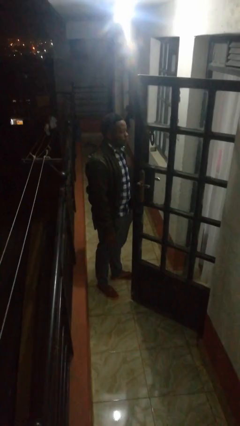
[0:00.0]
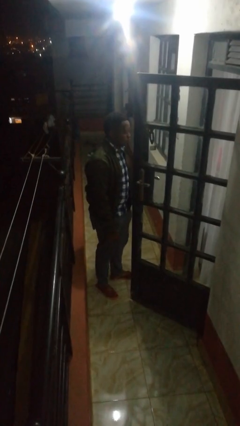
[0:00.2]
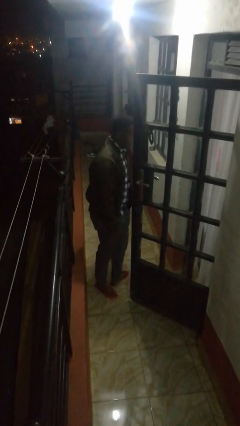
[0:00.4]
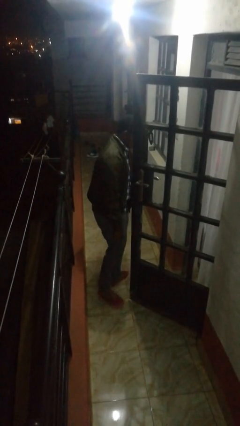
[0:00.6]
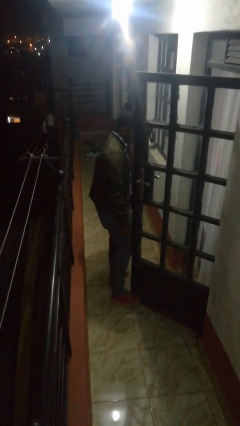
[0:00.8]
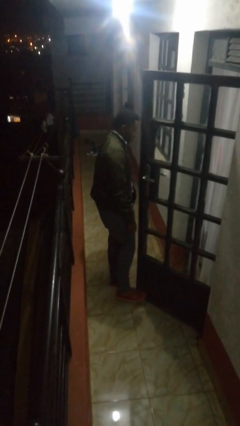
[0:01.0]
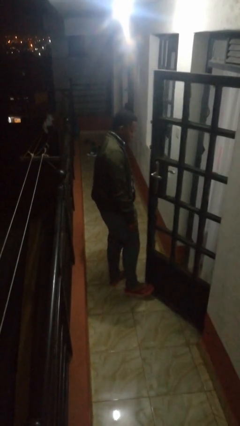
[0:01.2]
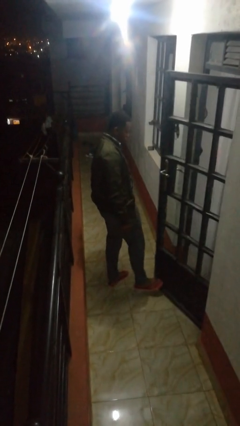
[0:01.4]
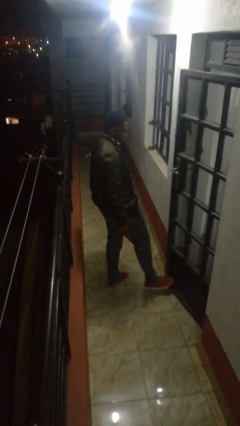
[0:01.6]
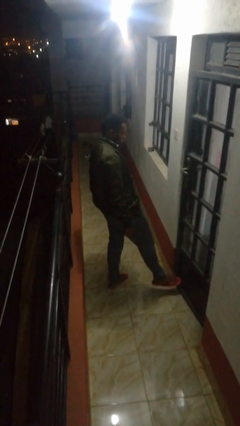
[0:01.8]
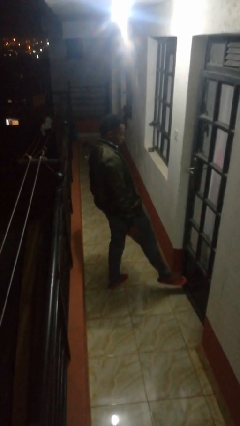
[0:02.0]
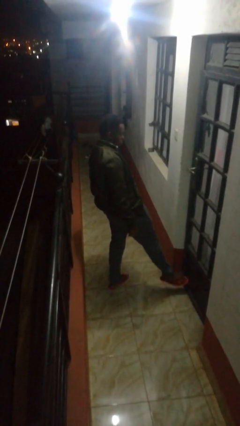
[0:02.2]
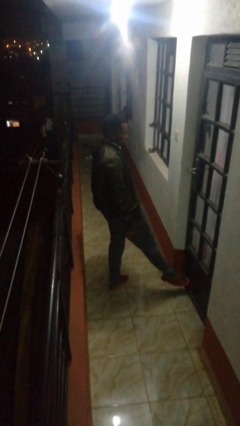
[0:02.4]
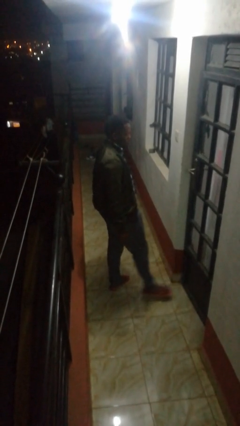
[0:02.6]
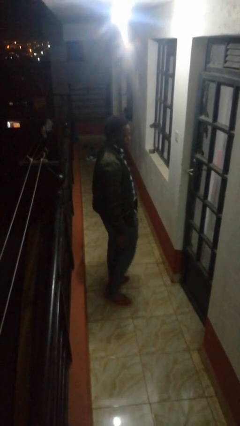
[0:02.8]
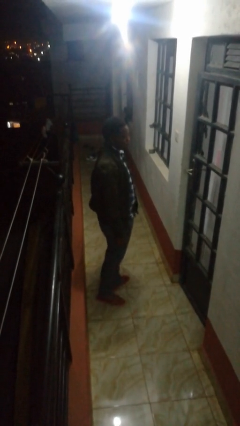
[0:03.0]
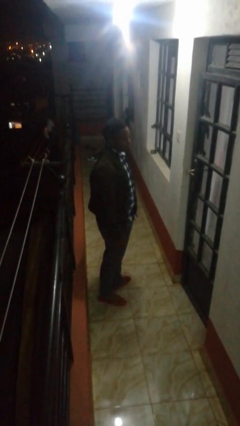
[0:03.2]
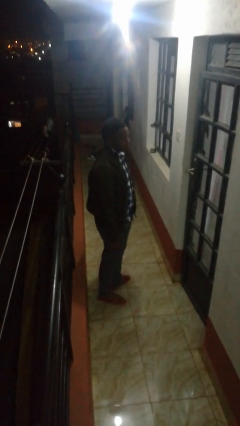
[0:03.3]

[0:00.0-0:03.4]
person closes door with foot

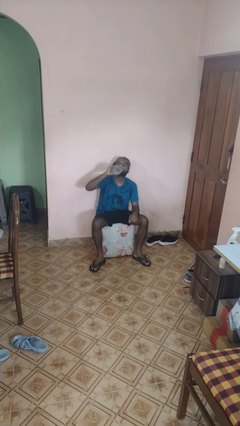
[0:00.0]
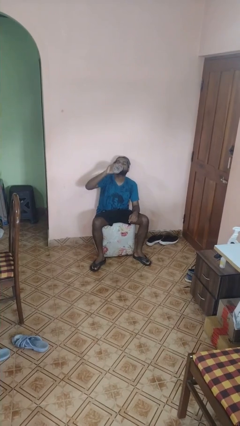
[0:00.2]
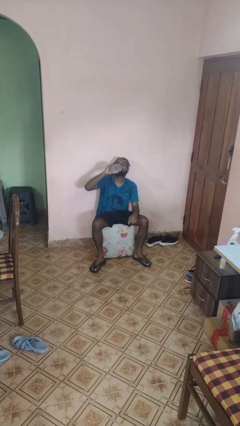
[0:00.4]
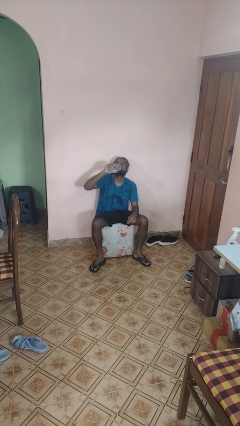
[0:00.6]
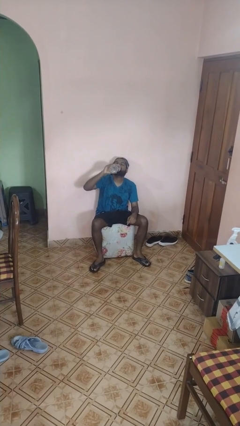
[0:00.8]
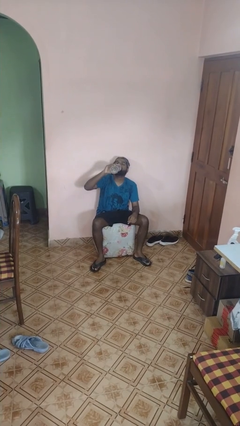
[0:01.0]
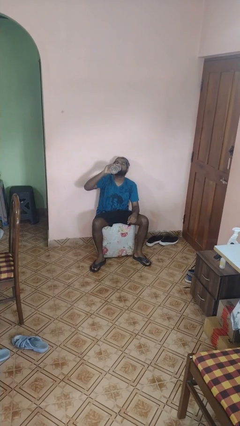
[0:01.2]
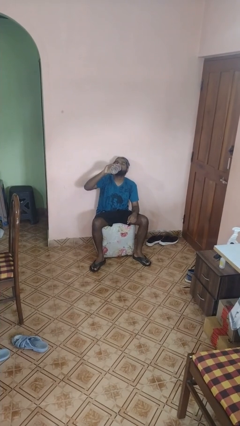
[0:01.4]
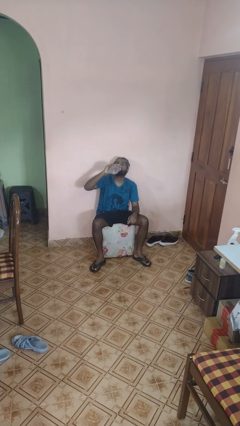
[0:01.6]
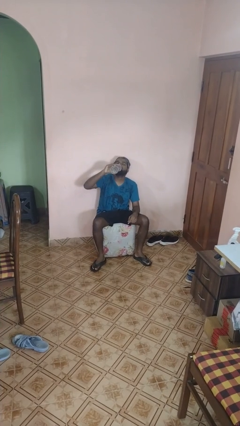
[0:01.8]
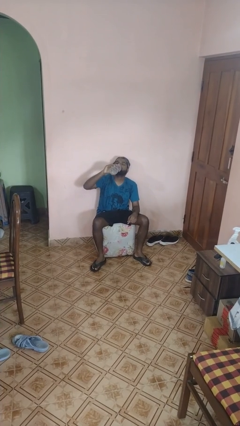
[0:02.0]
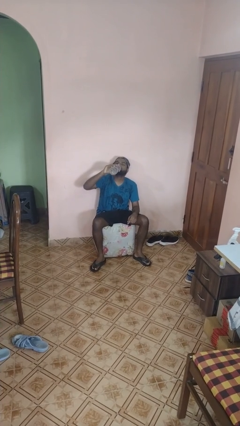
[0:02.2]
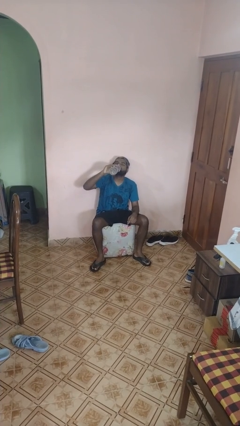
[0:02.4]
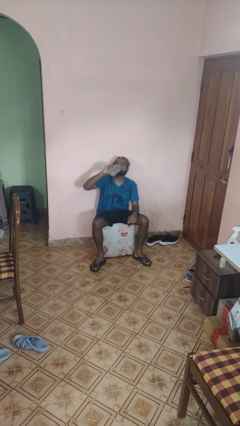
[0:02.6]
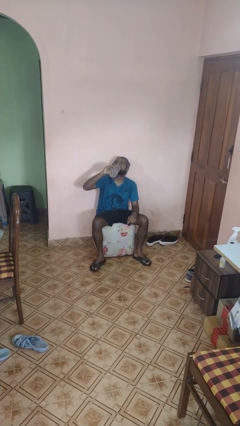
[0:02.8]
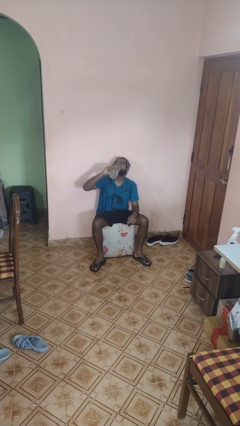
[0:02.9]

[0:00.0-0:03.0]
person drinks from bottle

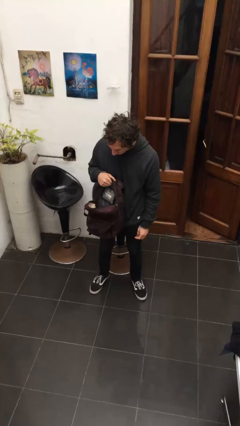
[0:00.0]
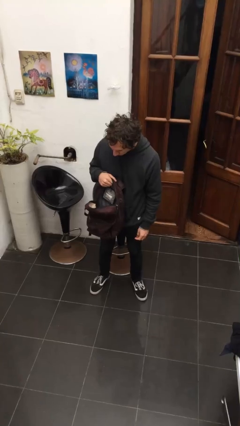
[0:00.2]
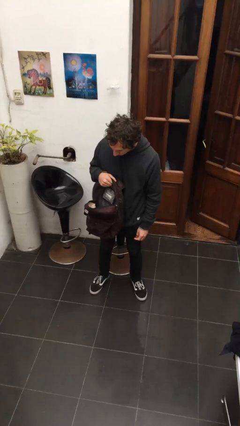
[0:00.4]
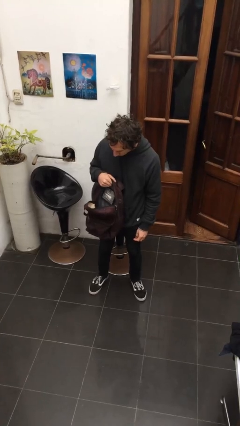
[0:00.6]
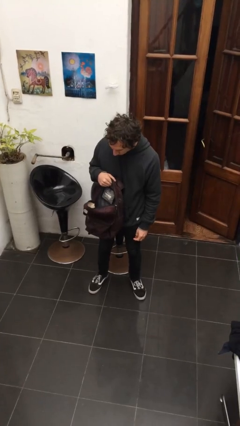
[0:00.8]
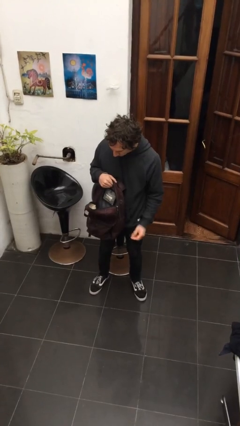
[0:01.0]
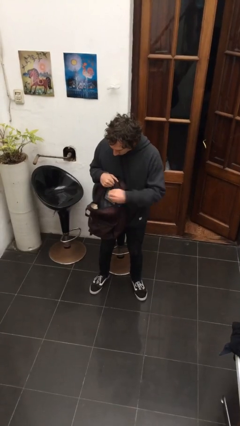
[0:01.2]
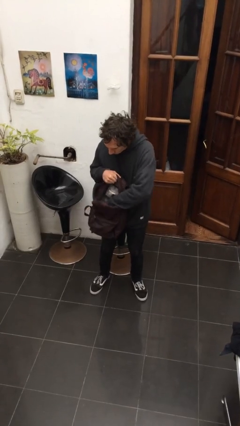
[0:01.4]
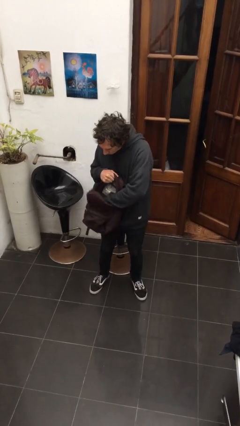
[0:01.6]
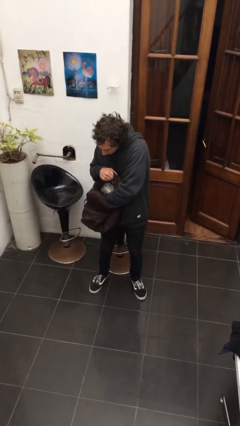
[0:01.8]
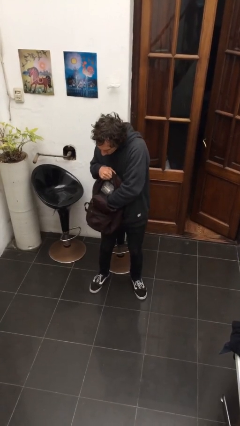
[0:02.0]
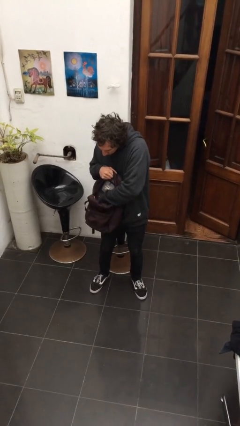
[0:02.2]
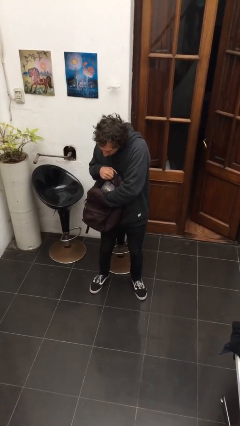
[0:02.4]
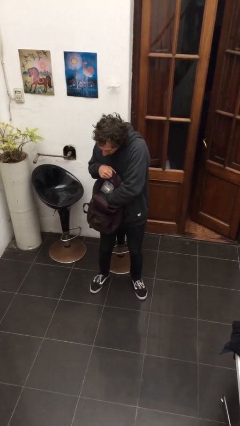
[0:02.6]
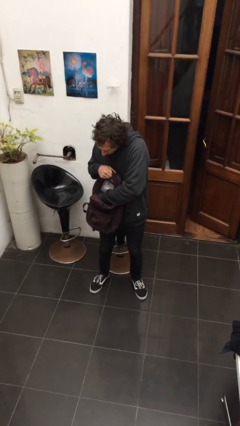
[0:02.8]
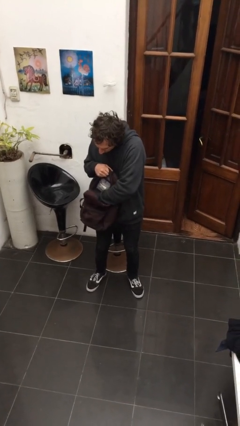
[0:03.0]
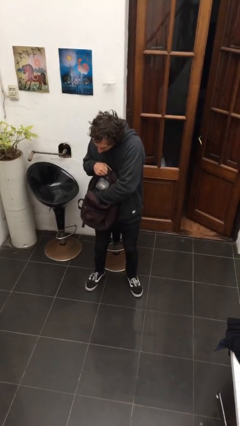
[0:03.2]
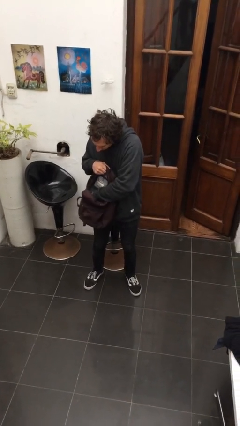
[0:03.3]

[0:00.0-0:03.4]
person searches in backpack

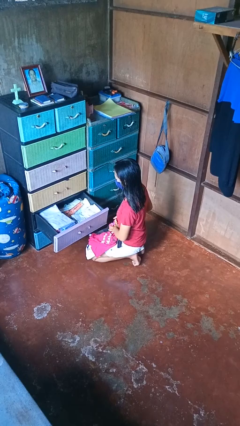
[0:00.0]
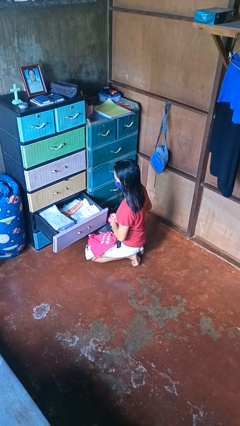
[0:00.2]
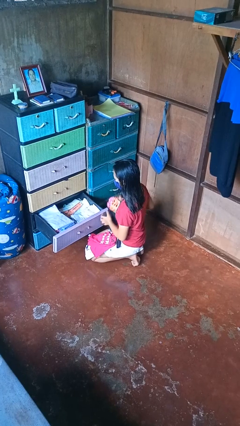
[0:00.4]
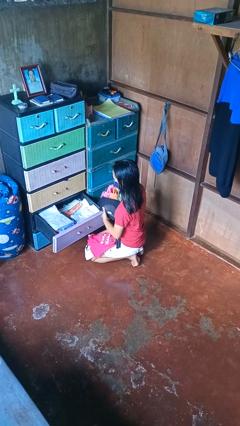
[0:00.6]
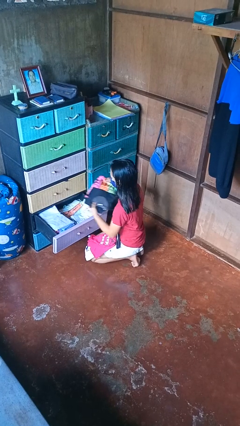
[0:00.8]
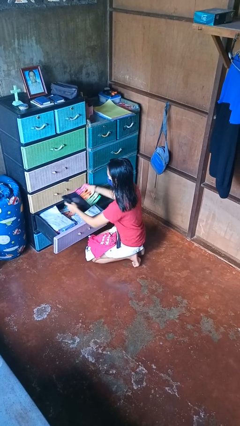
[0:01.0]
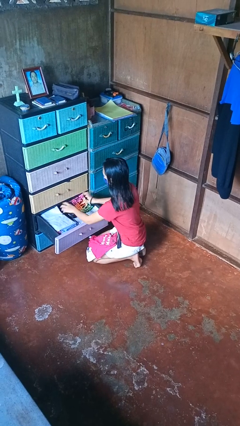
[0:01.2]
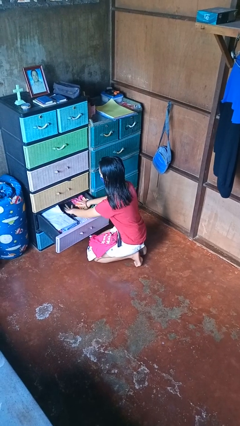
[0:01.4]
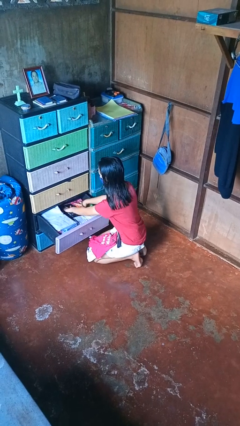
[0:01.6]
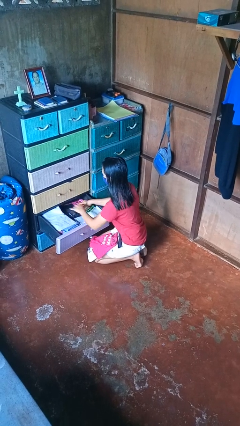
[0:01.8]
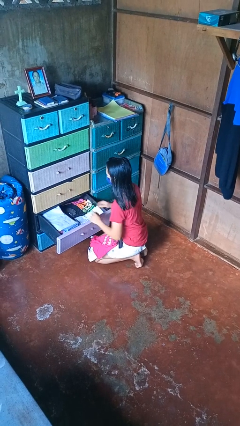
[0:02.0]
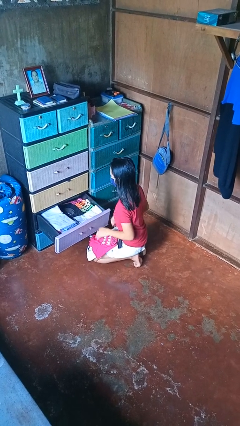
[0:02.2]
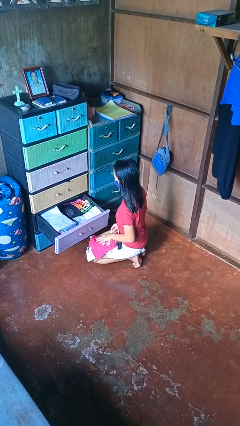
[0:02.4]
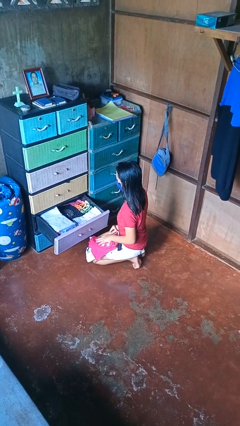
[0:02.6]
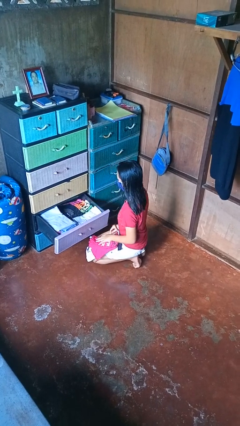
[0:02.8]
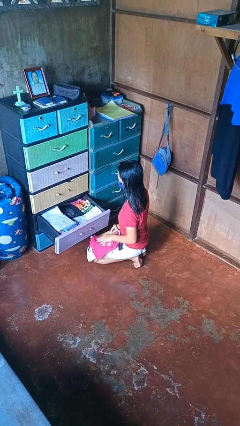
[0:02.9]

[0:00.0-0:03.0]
person puts clothes into dresser

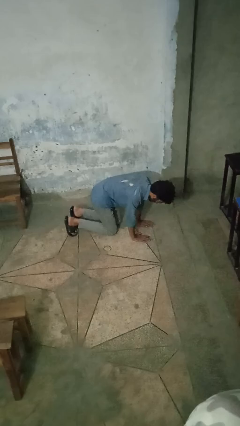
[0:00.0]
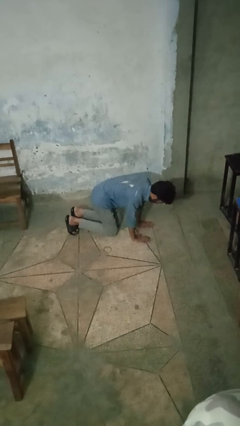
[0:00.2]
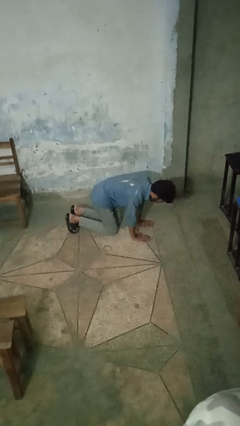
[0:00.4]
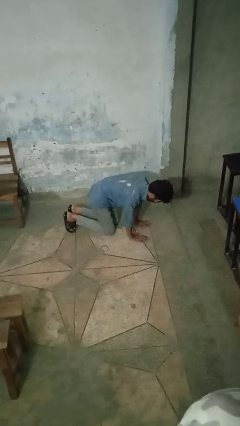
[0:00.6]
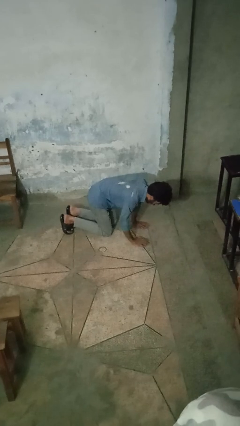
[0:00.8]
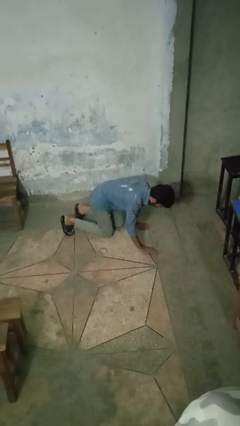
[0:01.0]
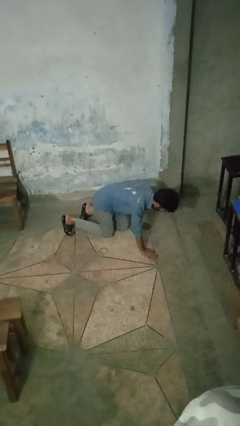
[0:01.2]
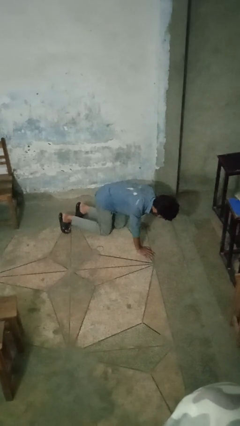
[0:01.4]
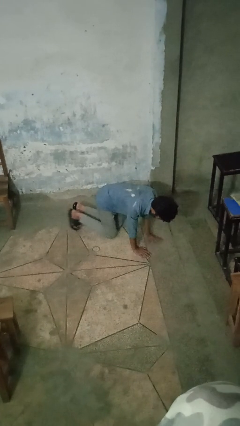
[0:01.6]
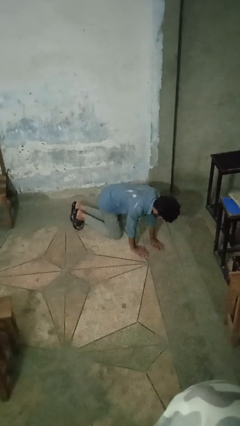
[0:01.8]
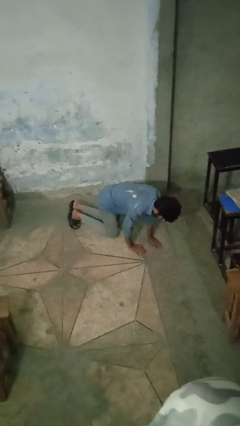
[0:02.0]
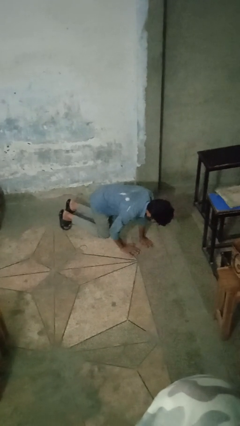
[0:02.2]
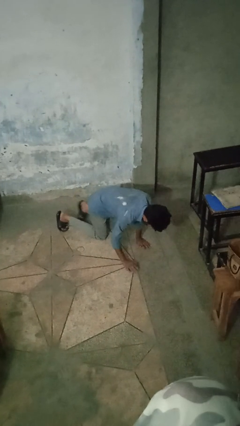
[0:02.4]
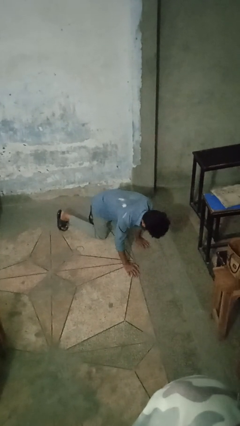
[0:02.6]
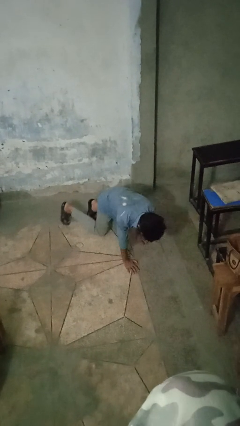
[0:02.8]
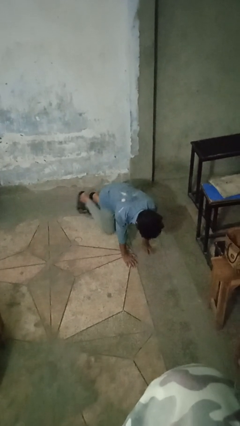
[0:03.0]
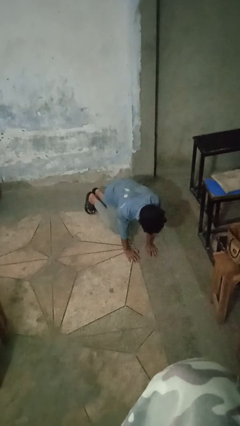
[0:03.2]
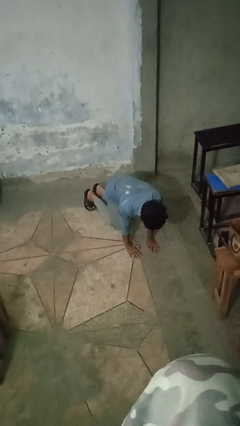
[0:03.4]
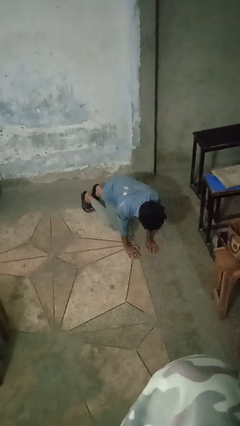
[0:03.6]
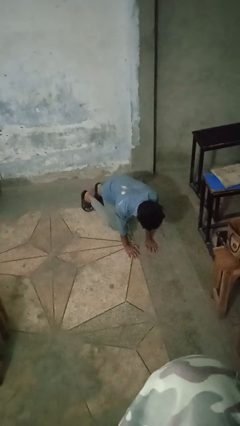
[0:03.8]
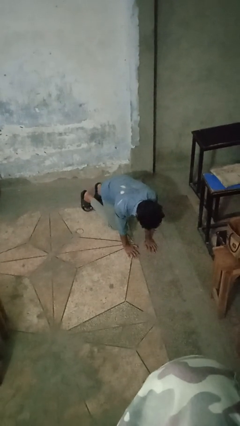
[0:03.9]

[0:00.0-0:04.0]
person crawls

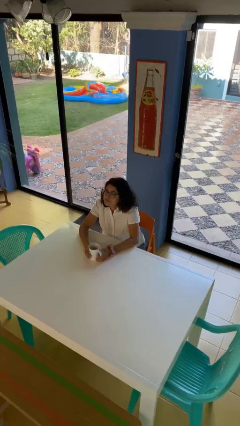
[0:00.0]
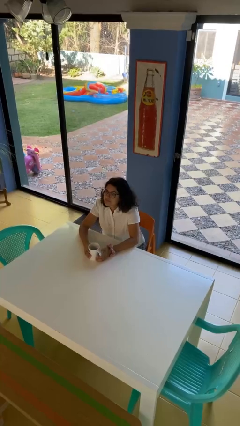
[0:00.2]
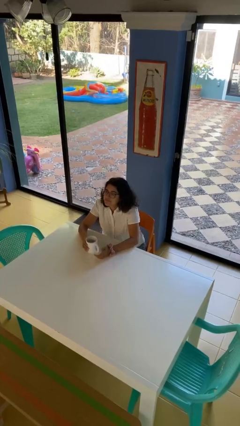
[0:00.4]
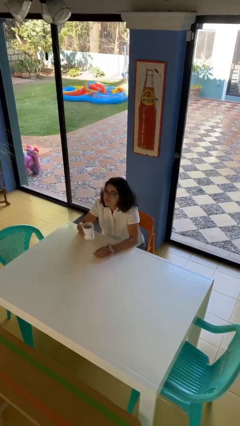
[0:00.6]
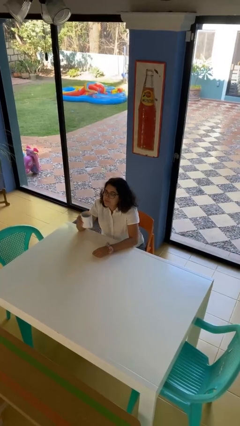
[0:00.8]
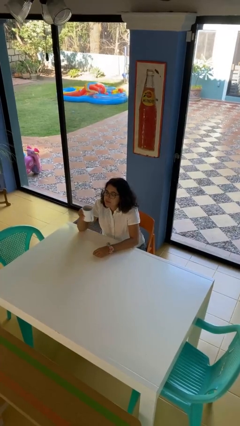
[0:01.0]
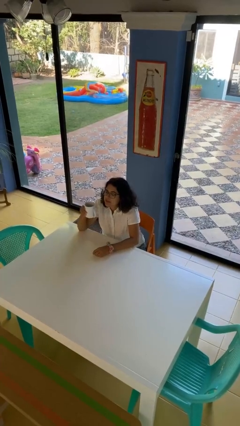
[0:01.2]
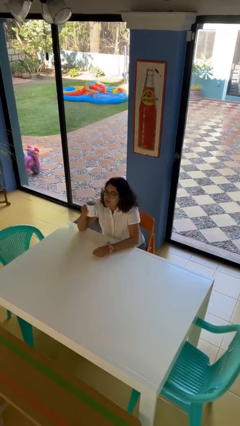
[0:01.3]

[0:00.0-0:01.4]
person picks up object from table
